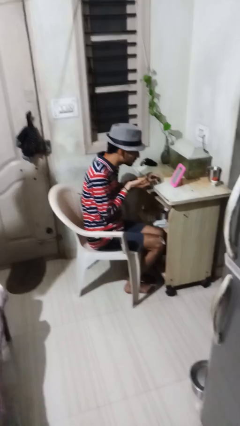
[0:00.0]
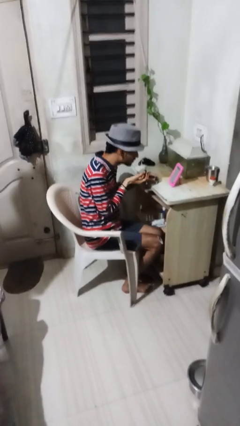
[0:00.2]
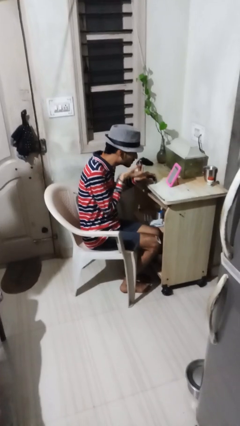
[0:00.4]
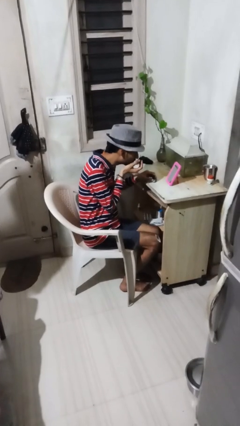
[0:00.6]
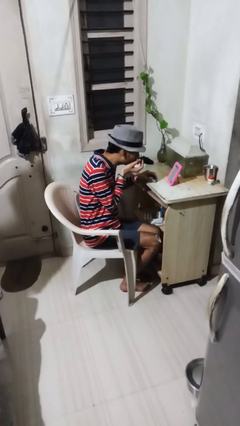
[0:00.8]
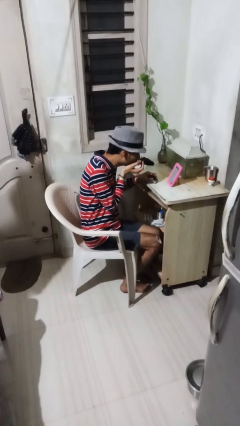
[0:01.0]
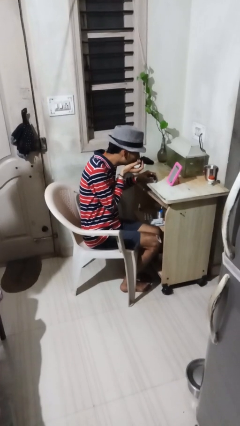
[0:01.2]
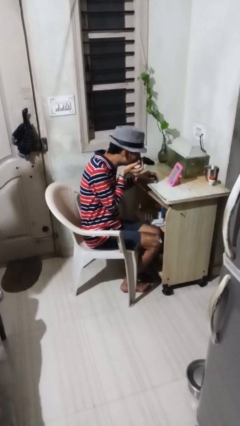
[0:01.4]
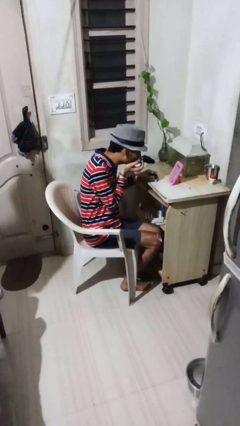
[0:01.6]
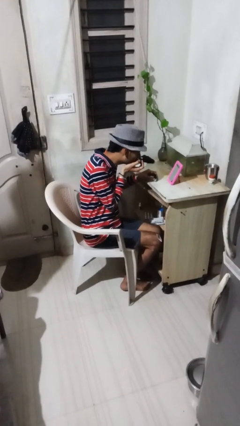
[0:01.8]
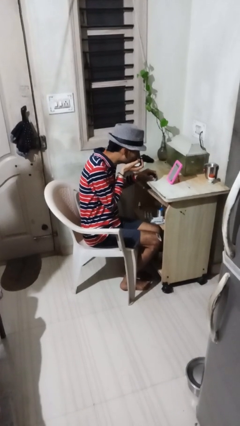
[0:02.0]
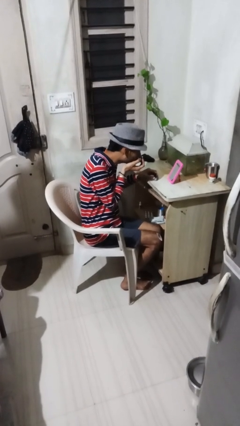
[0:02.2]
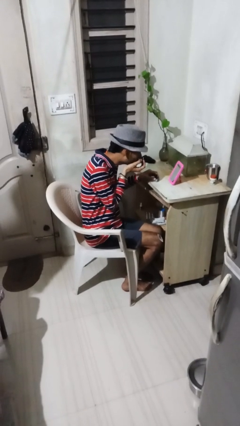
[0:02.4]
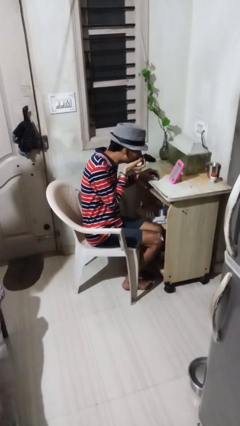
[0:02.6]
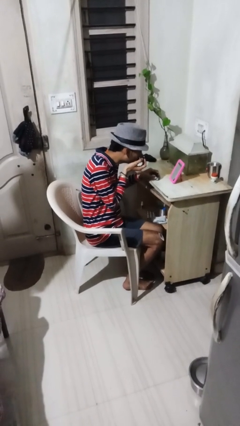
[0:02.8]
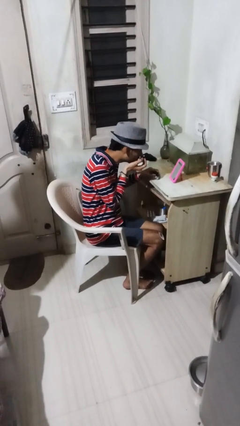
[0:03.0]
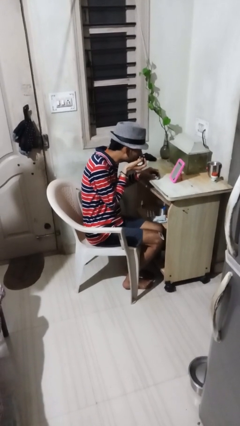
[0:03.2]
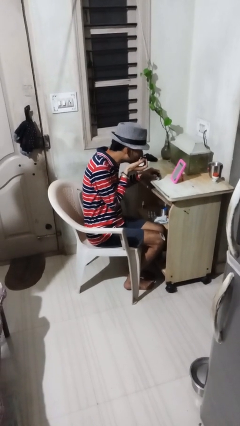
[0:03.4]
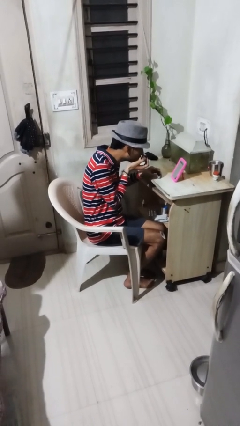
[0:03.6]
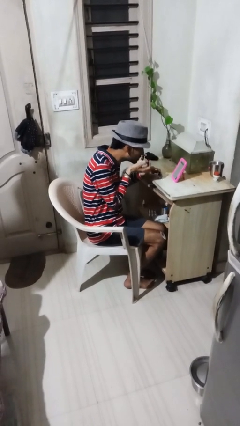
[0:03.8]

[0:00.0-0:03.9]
person applies eye makeup

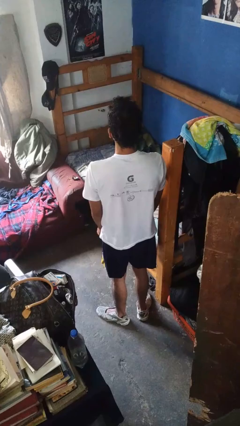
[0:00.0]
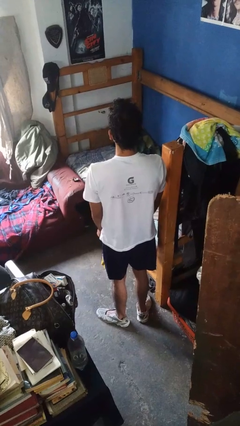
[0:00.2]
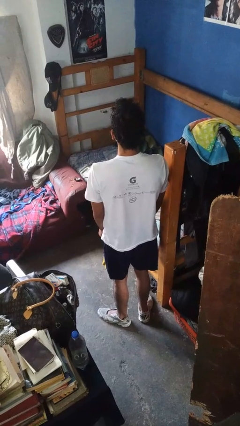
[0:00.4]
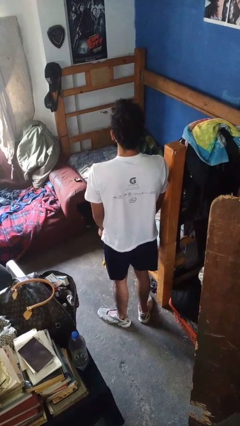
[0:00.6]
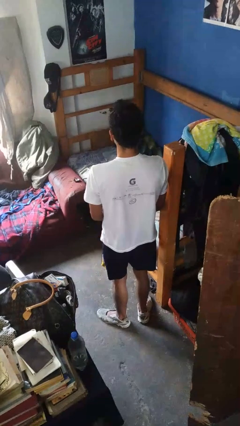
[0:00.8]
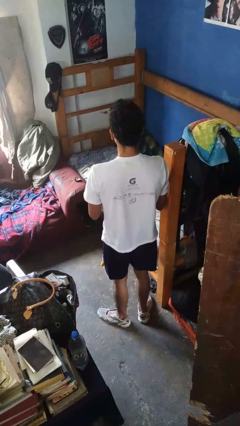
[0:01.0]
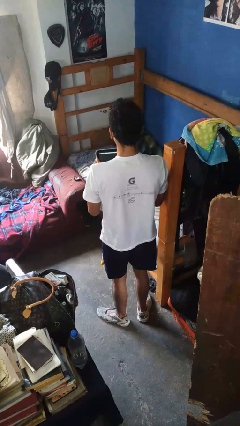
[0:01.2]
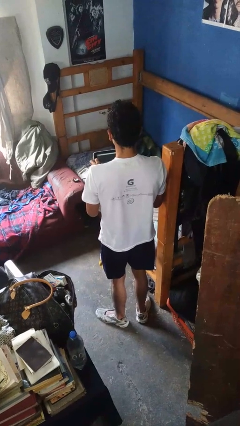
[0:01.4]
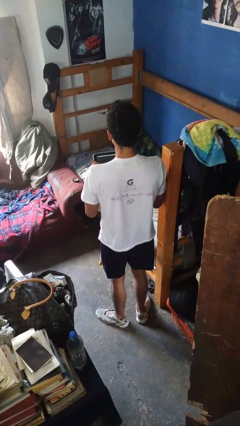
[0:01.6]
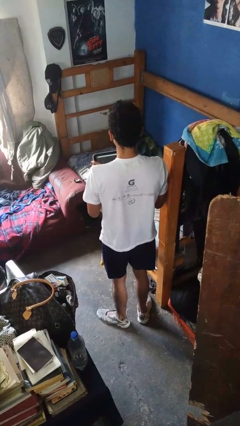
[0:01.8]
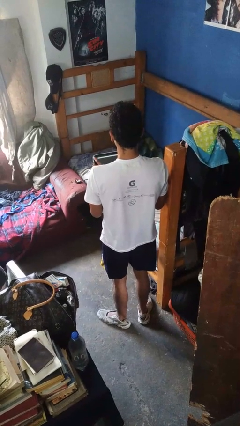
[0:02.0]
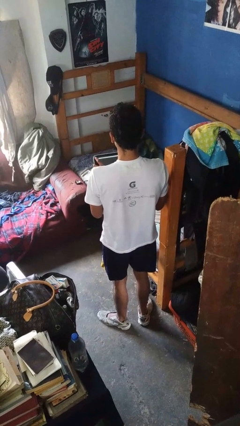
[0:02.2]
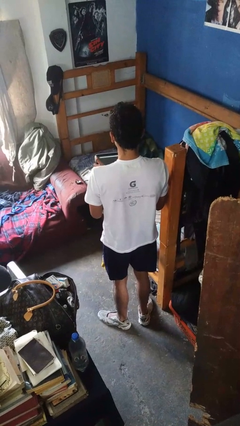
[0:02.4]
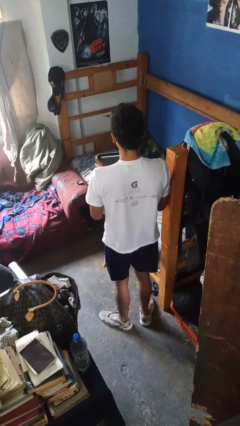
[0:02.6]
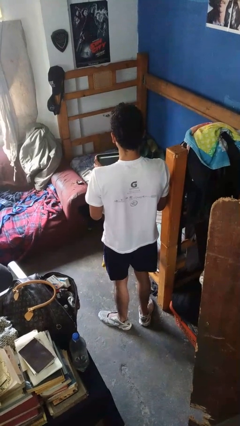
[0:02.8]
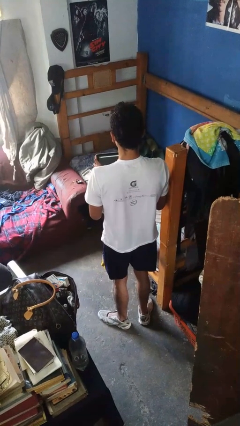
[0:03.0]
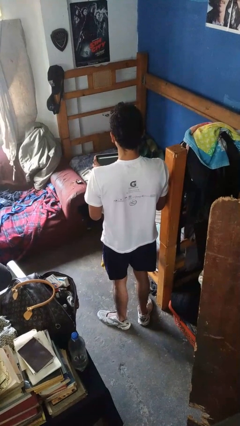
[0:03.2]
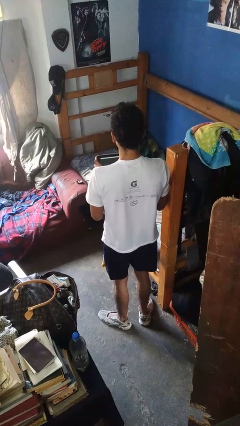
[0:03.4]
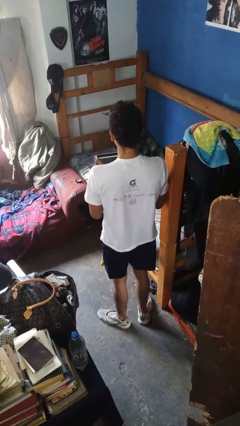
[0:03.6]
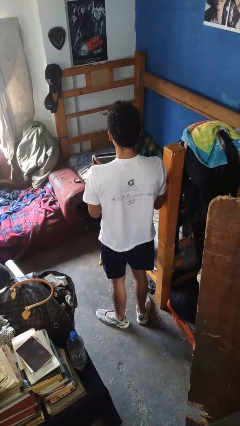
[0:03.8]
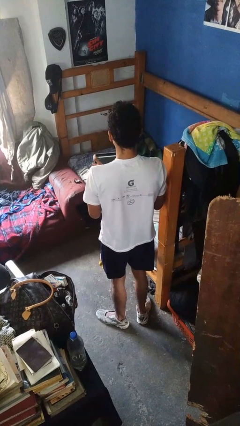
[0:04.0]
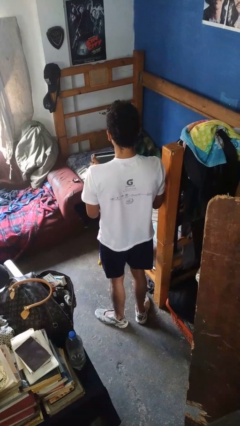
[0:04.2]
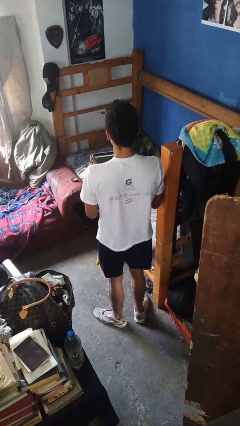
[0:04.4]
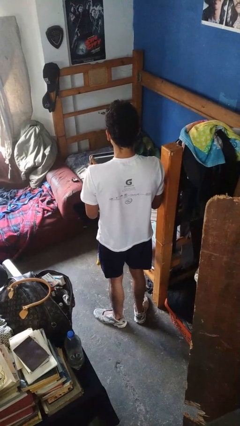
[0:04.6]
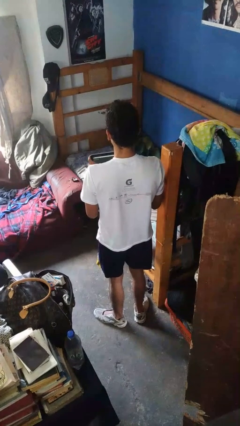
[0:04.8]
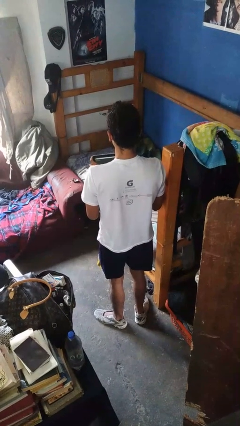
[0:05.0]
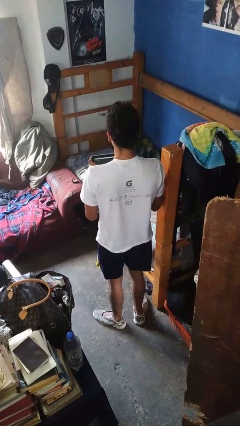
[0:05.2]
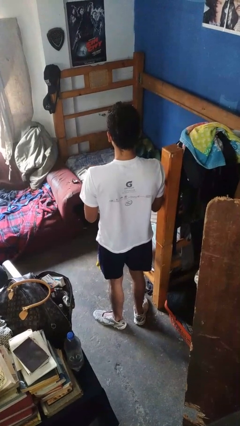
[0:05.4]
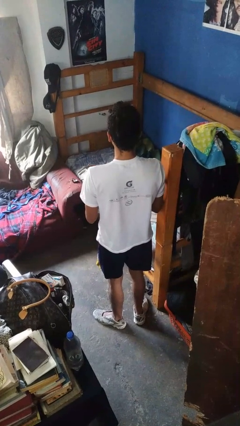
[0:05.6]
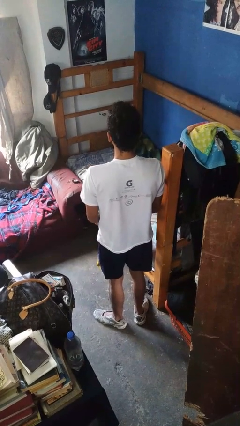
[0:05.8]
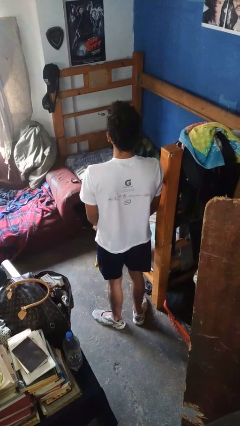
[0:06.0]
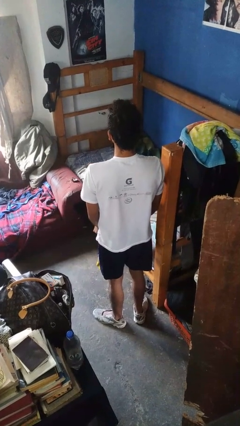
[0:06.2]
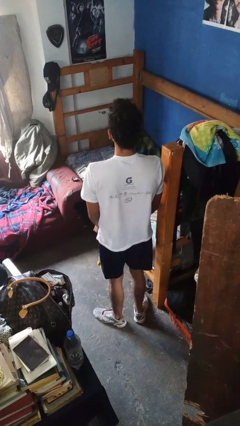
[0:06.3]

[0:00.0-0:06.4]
person interacts with tablet

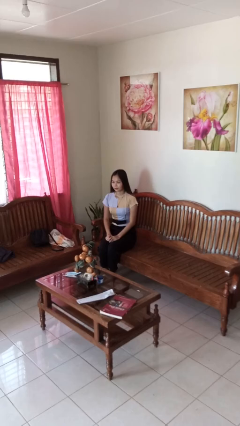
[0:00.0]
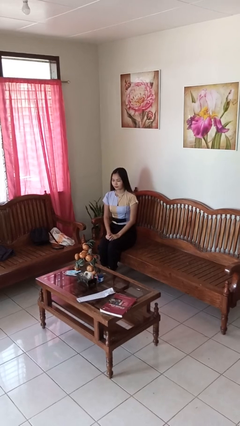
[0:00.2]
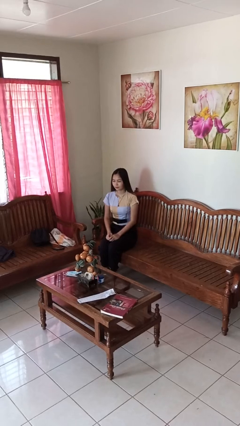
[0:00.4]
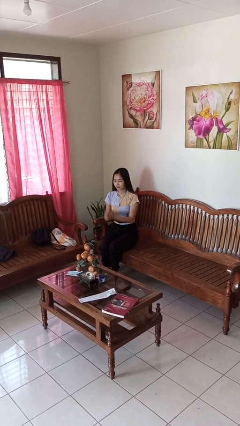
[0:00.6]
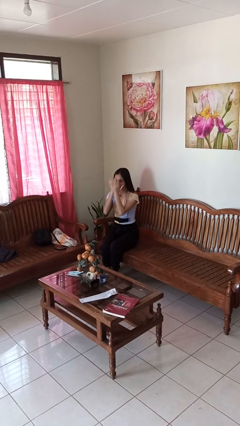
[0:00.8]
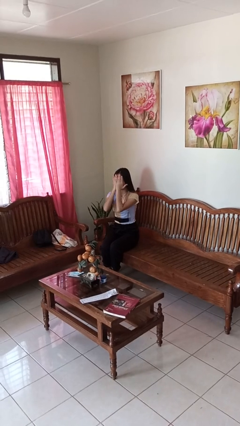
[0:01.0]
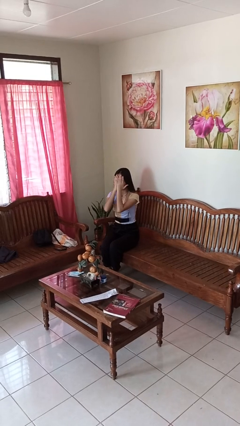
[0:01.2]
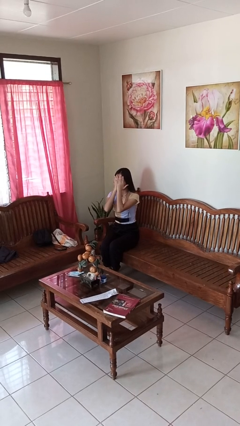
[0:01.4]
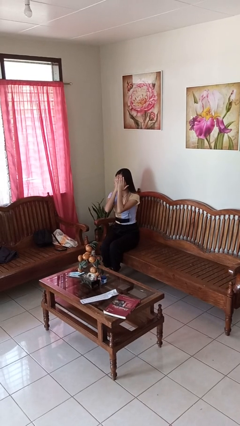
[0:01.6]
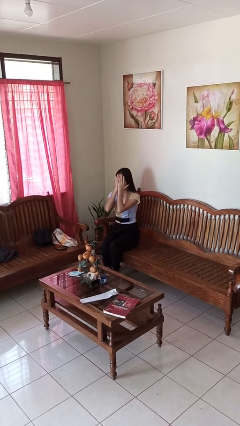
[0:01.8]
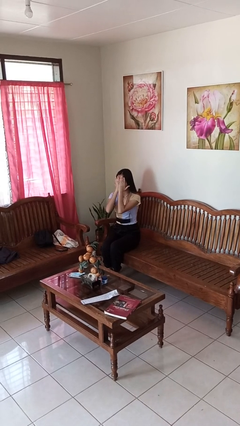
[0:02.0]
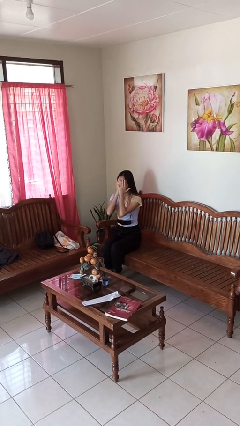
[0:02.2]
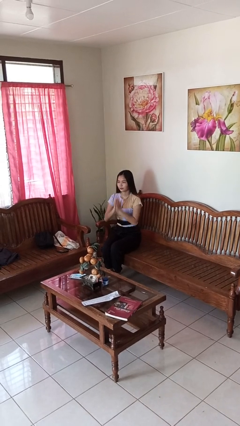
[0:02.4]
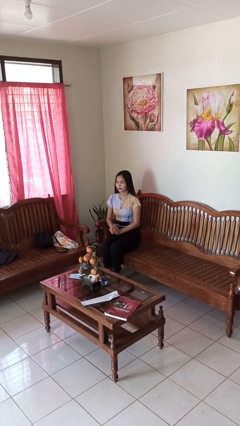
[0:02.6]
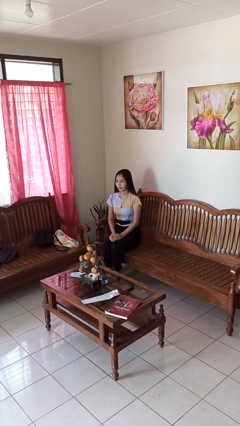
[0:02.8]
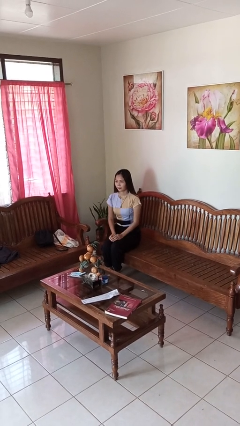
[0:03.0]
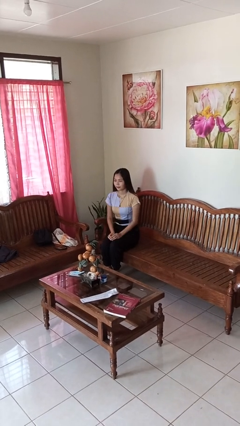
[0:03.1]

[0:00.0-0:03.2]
person covers face with hands

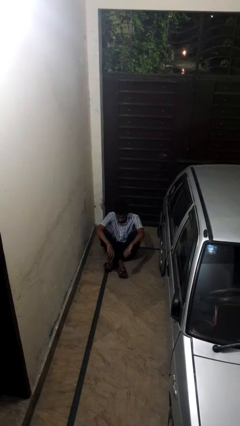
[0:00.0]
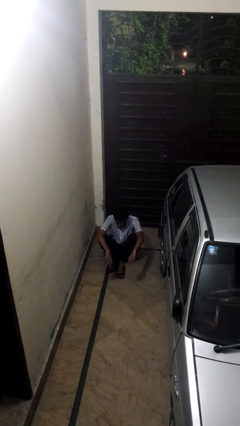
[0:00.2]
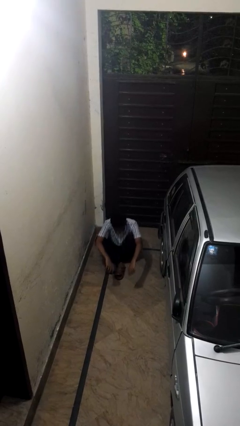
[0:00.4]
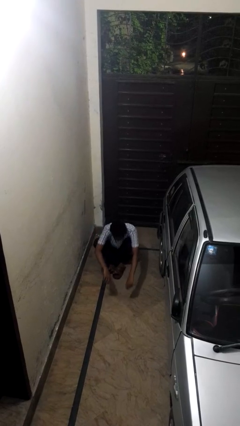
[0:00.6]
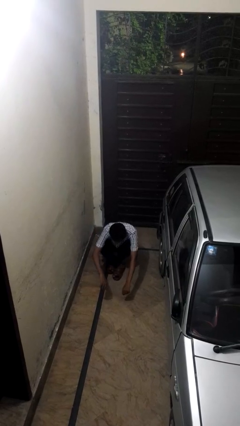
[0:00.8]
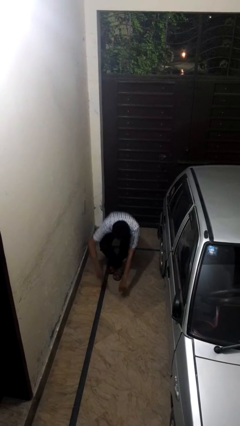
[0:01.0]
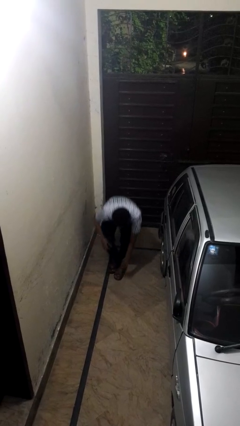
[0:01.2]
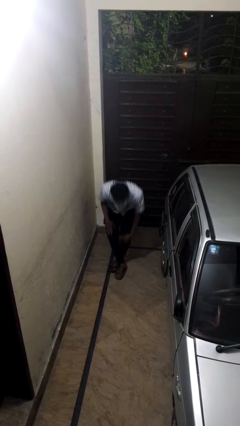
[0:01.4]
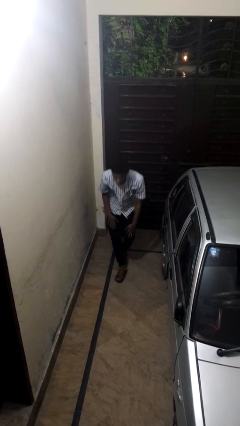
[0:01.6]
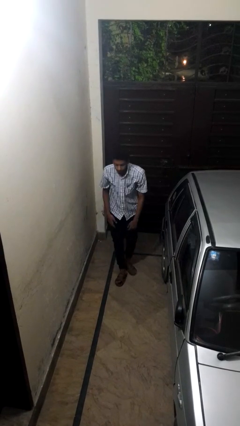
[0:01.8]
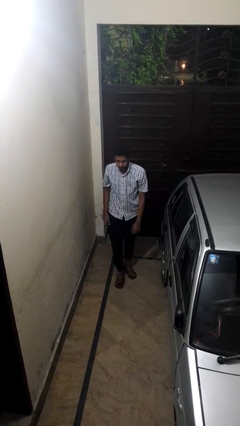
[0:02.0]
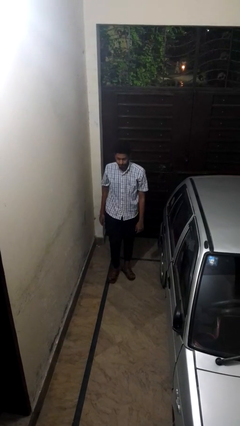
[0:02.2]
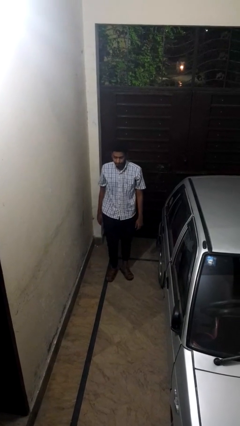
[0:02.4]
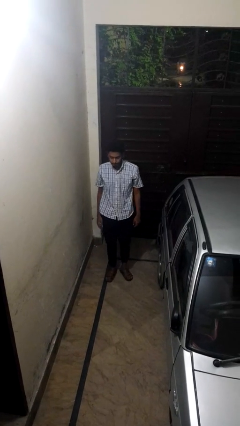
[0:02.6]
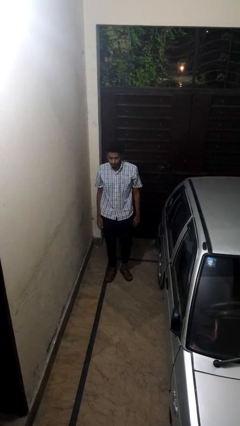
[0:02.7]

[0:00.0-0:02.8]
person stands up from floor

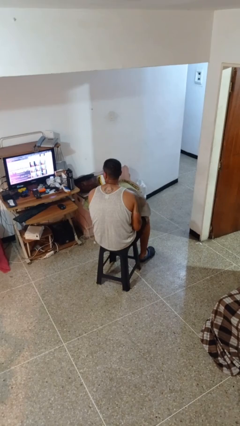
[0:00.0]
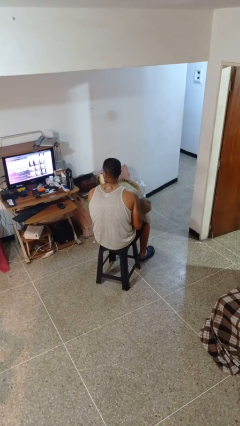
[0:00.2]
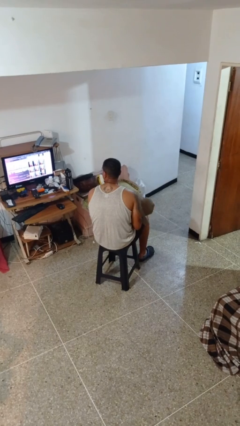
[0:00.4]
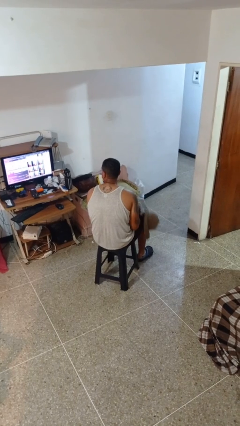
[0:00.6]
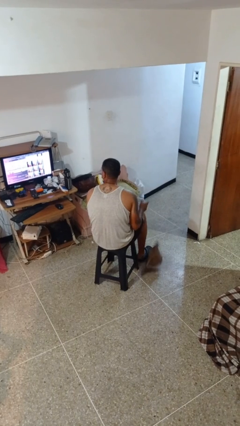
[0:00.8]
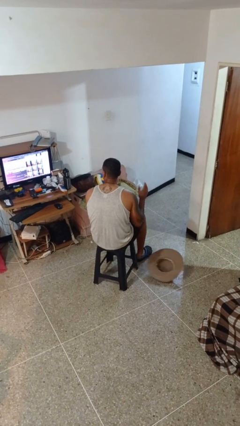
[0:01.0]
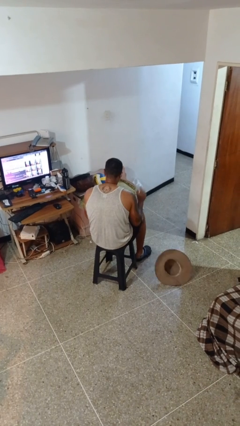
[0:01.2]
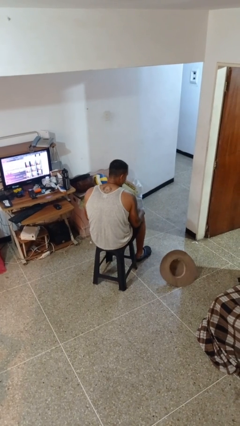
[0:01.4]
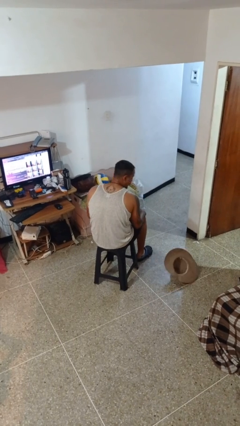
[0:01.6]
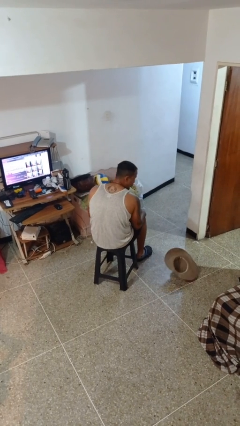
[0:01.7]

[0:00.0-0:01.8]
person drops object
